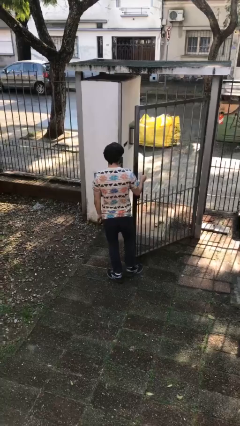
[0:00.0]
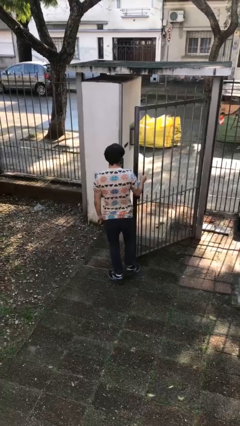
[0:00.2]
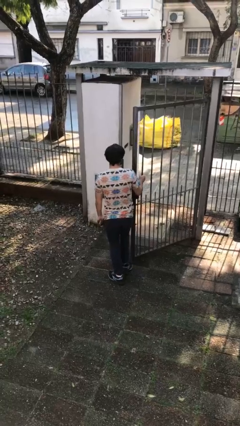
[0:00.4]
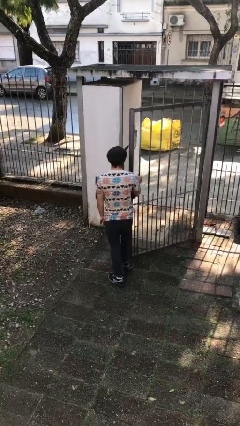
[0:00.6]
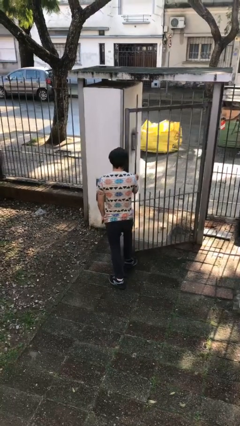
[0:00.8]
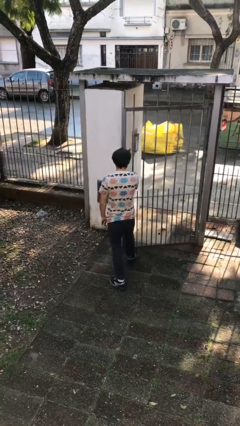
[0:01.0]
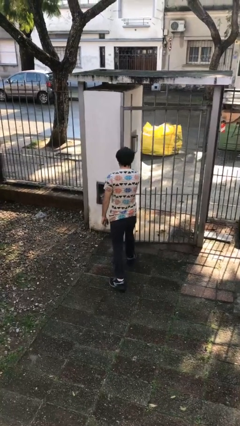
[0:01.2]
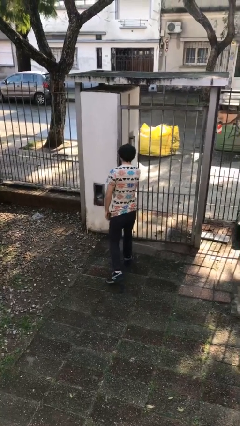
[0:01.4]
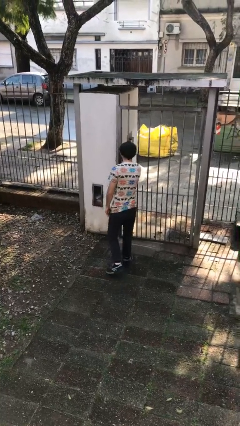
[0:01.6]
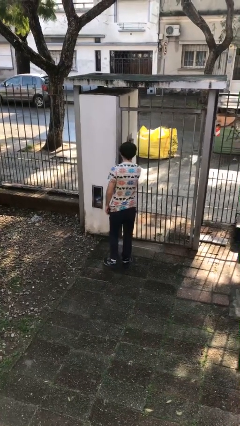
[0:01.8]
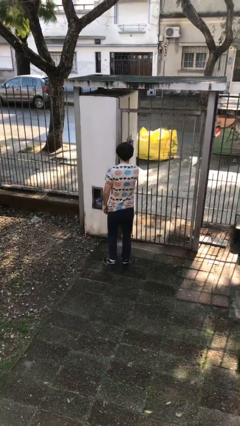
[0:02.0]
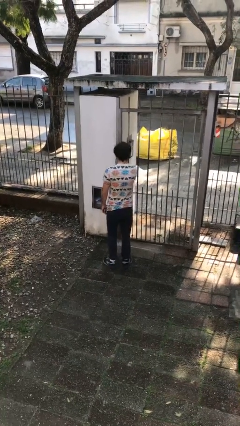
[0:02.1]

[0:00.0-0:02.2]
person closes gate

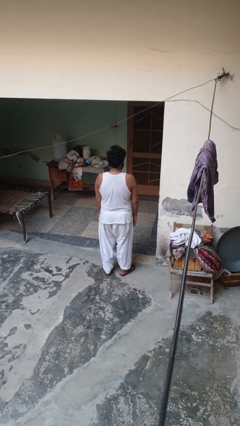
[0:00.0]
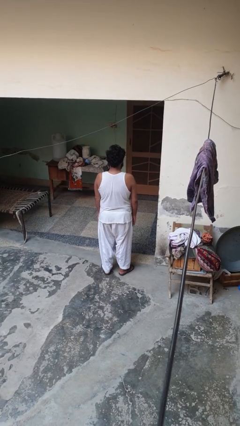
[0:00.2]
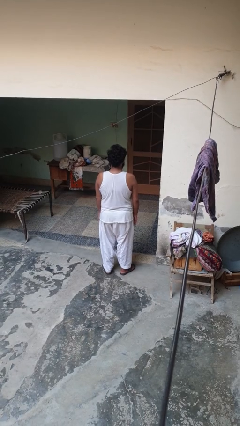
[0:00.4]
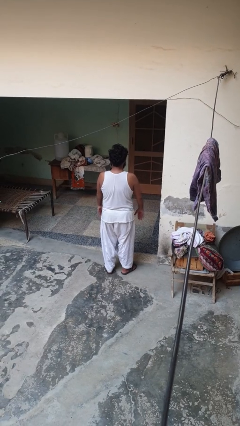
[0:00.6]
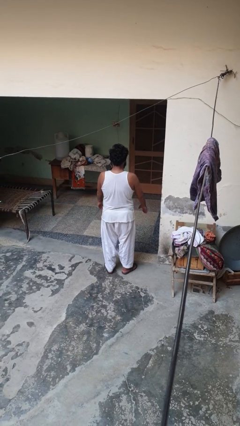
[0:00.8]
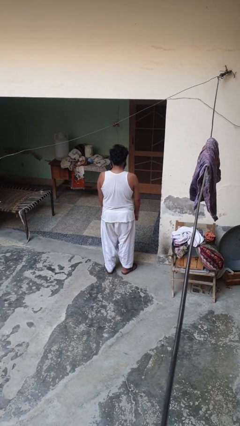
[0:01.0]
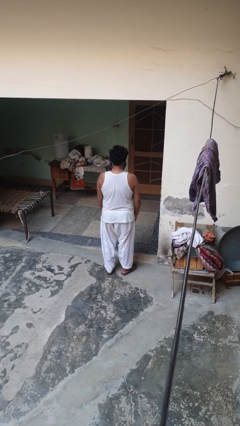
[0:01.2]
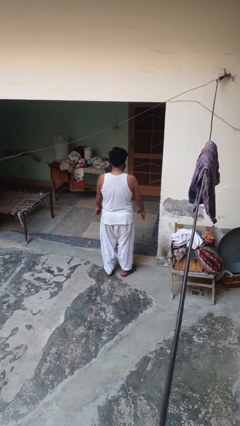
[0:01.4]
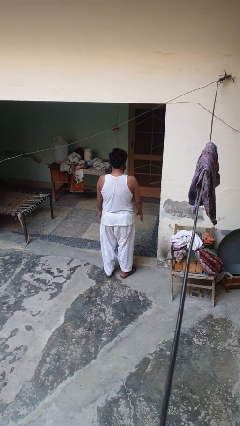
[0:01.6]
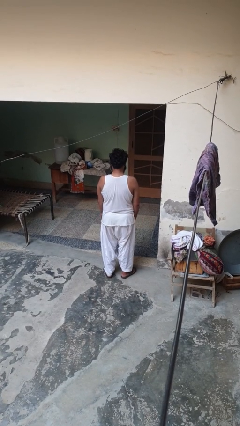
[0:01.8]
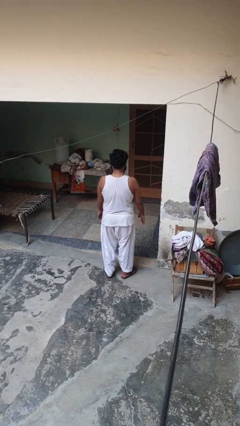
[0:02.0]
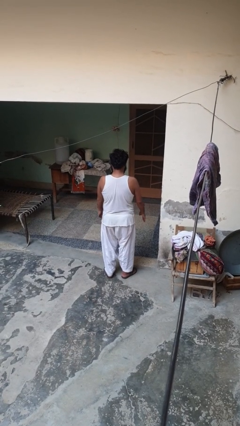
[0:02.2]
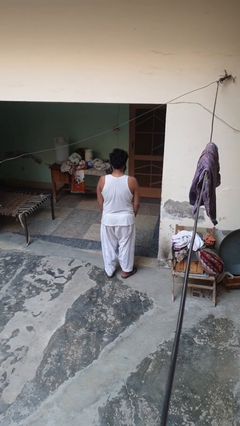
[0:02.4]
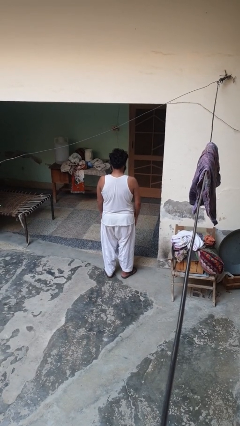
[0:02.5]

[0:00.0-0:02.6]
person slaps hands on thighs

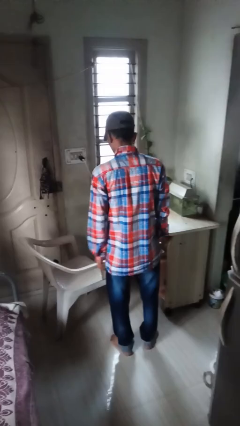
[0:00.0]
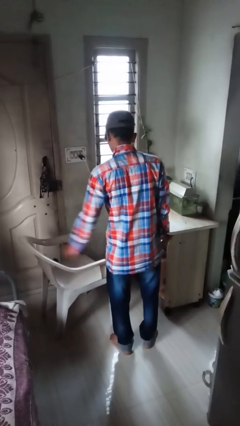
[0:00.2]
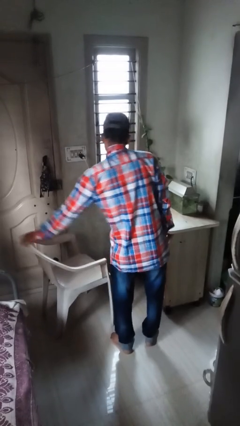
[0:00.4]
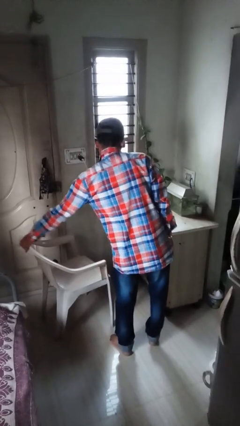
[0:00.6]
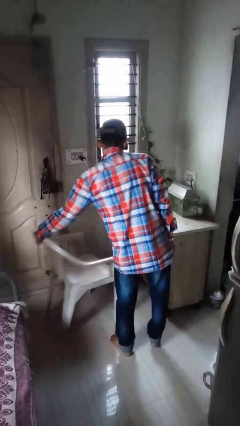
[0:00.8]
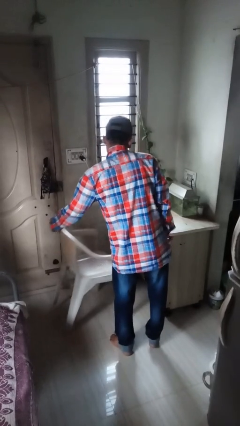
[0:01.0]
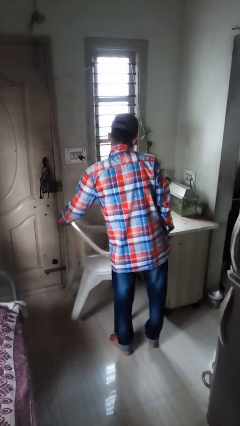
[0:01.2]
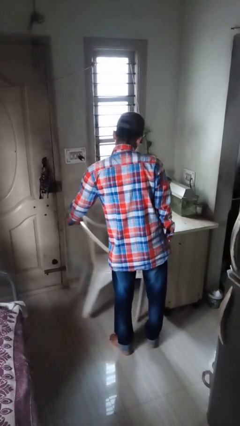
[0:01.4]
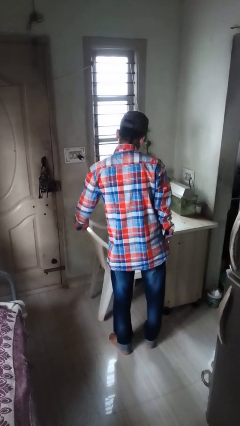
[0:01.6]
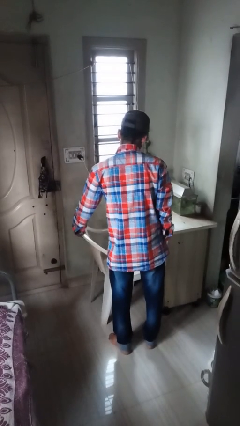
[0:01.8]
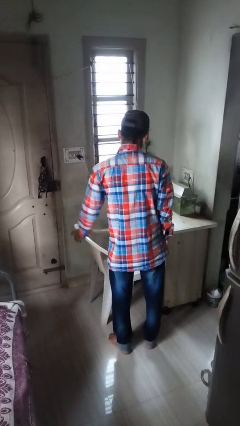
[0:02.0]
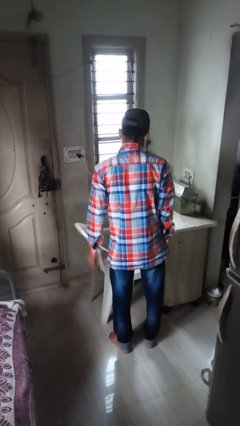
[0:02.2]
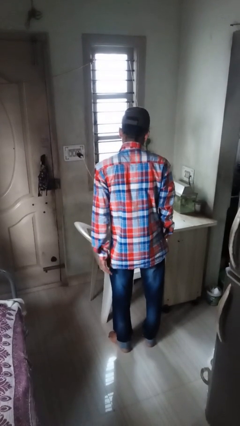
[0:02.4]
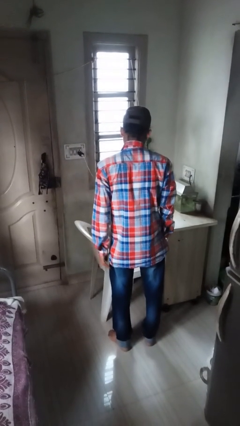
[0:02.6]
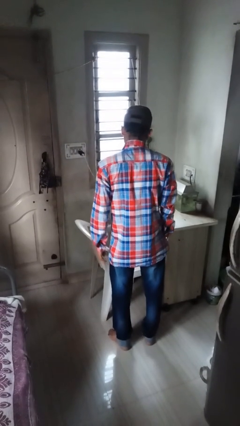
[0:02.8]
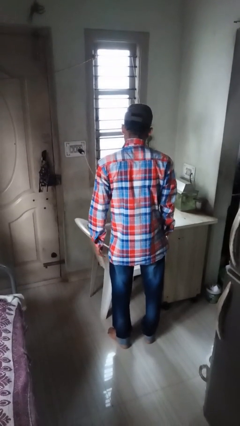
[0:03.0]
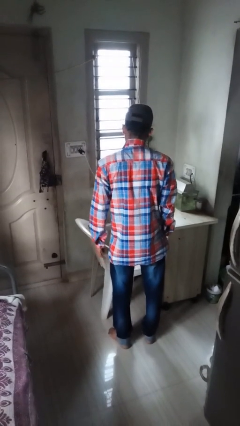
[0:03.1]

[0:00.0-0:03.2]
person pushes in chair

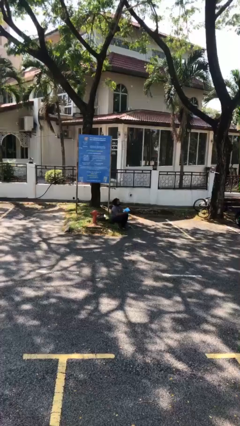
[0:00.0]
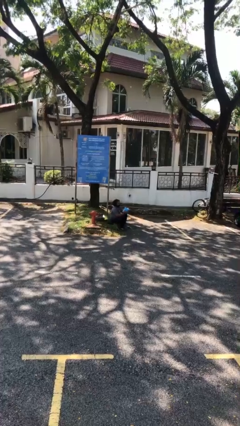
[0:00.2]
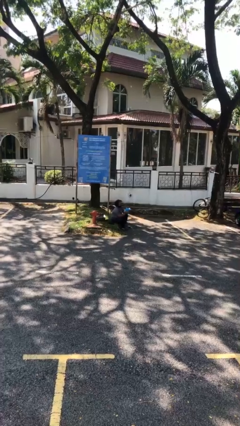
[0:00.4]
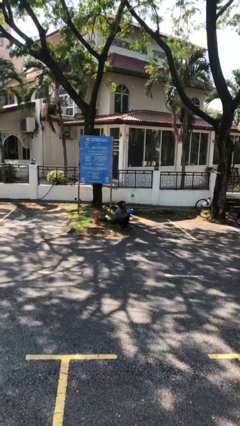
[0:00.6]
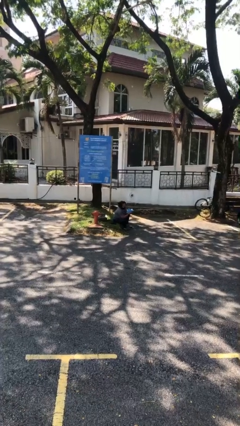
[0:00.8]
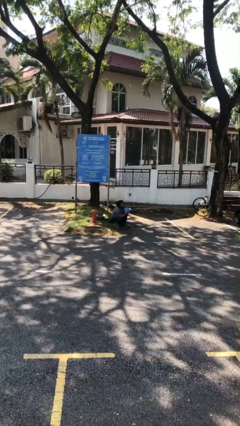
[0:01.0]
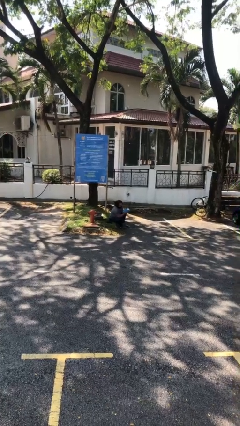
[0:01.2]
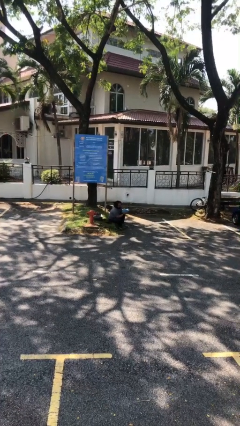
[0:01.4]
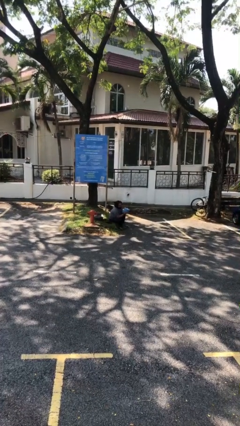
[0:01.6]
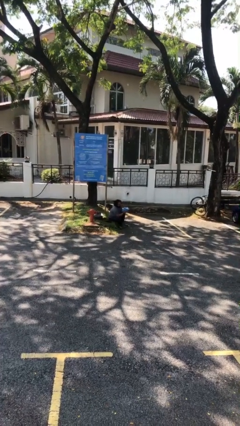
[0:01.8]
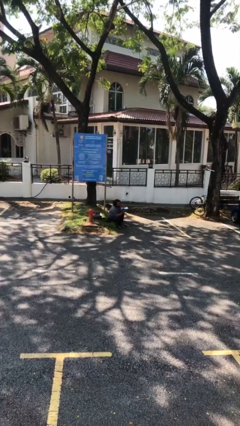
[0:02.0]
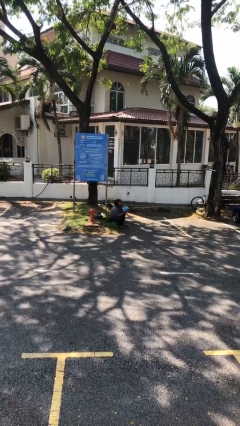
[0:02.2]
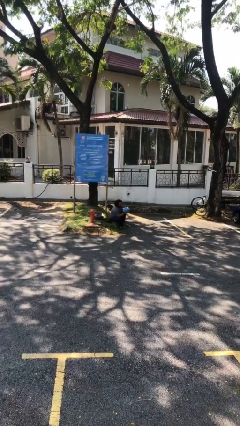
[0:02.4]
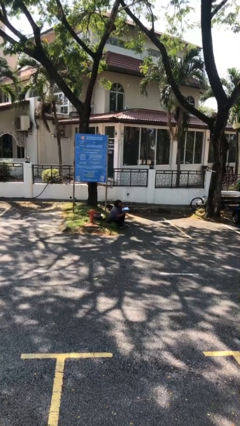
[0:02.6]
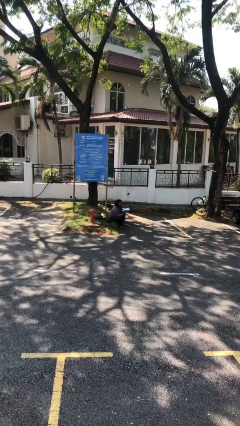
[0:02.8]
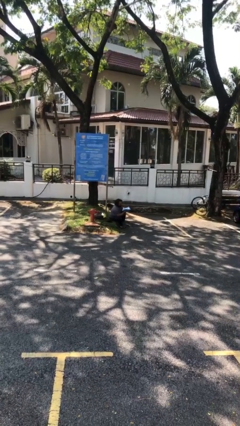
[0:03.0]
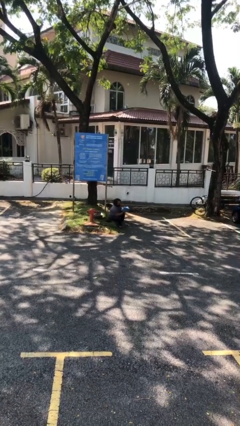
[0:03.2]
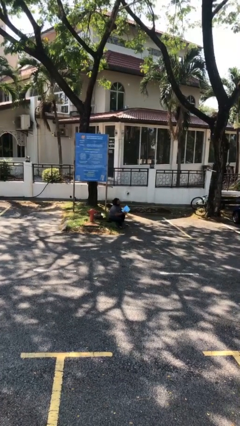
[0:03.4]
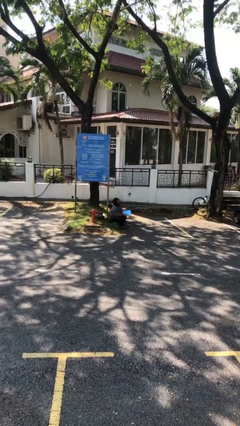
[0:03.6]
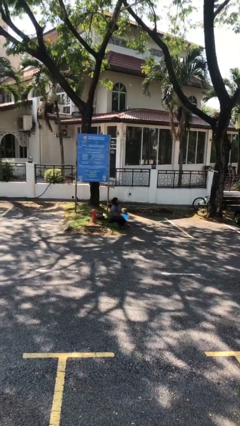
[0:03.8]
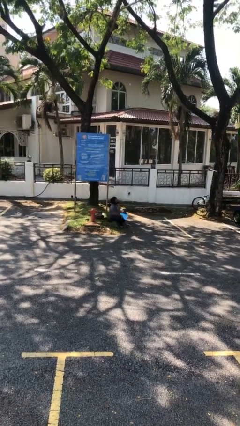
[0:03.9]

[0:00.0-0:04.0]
person reads document

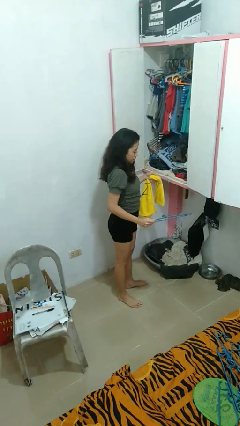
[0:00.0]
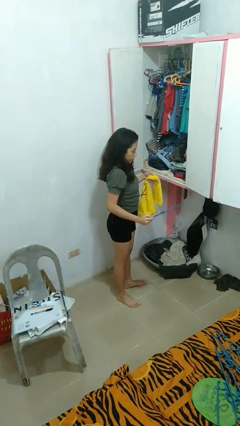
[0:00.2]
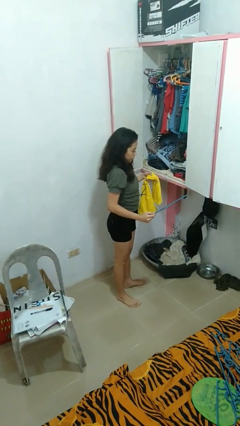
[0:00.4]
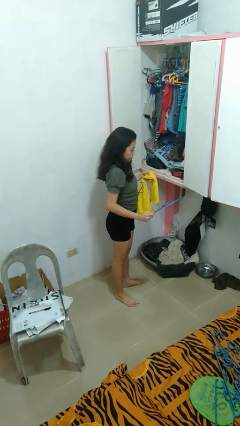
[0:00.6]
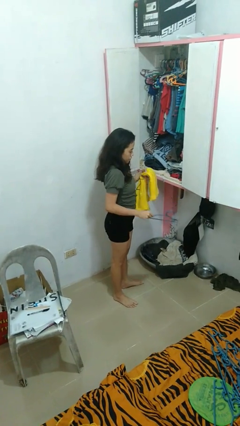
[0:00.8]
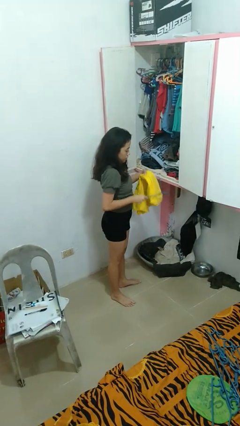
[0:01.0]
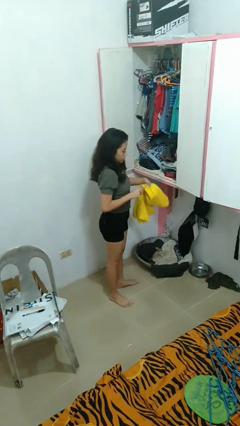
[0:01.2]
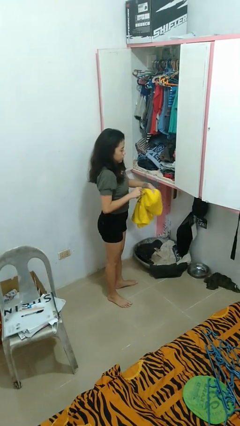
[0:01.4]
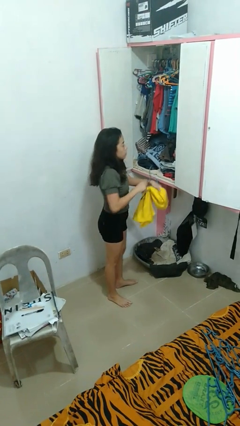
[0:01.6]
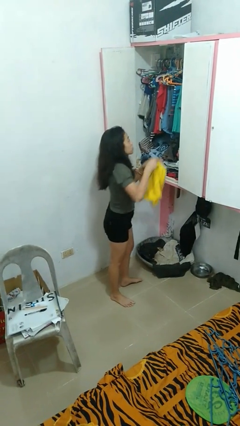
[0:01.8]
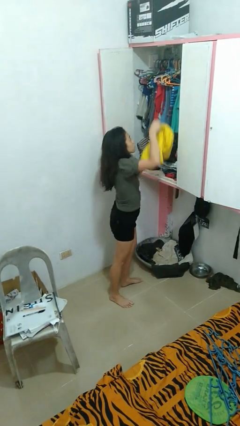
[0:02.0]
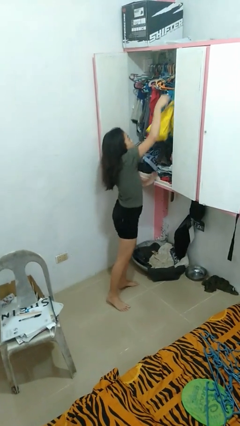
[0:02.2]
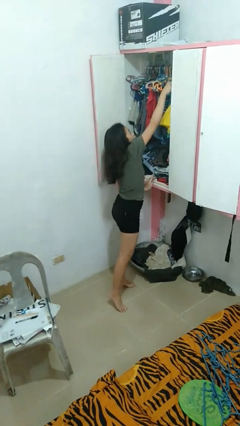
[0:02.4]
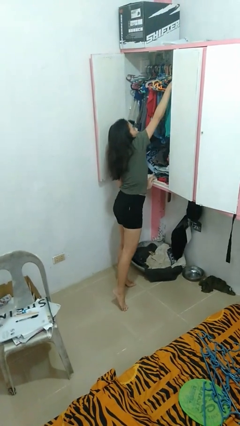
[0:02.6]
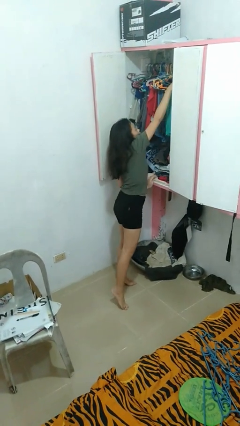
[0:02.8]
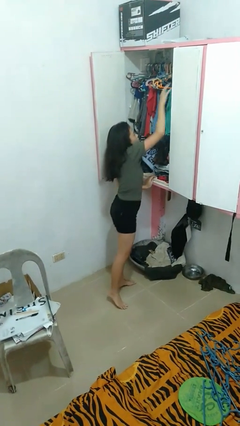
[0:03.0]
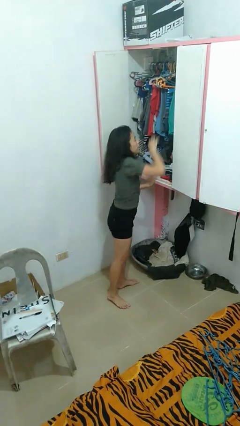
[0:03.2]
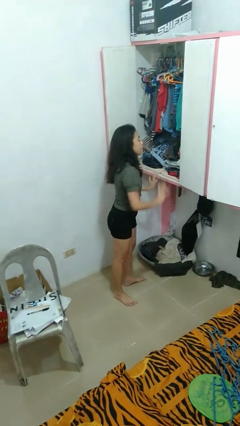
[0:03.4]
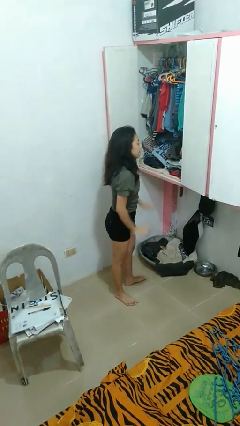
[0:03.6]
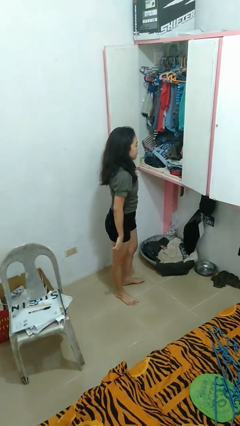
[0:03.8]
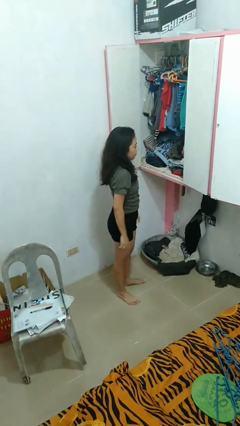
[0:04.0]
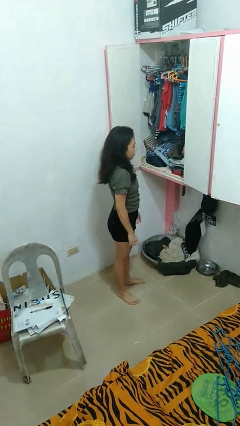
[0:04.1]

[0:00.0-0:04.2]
person puts clothes into closet

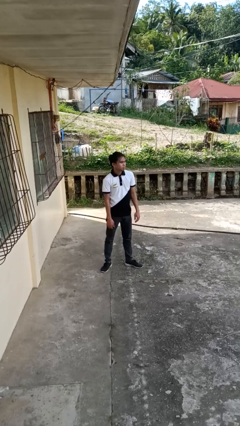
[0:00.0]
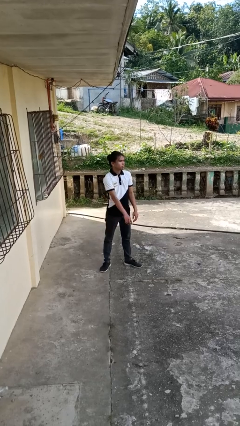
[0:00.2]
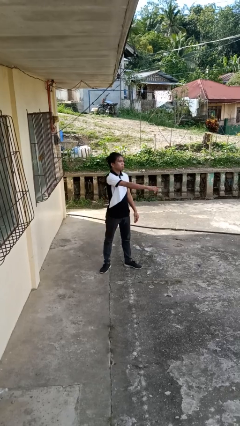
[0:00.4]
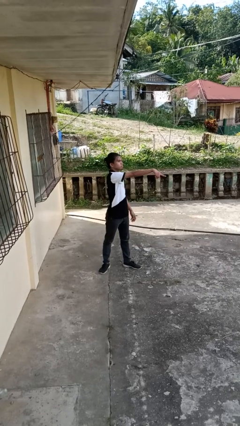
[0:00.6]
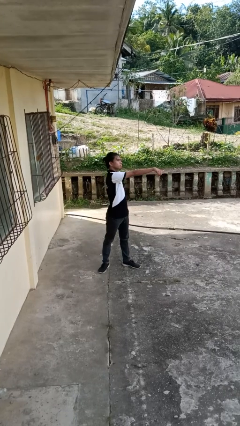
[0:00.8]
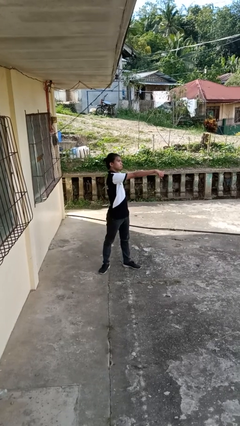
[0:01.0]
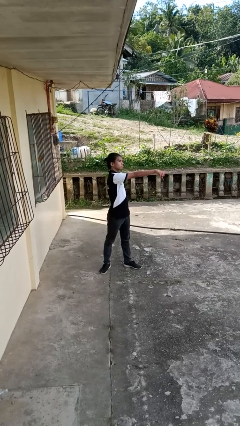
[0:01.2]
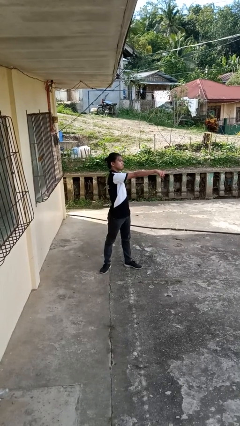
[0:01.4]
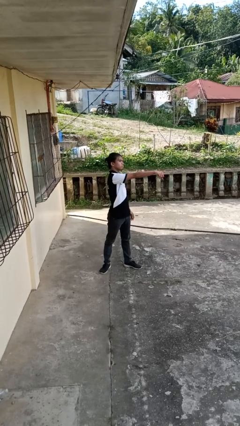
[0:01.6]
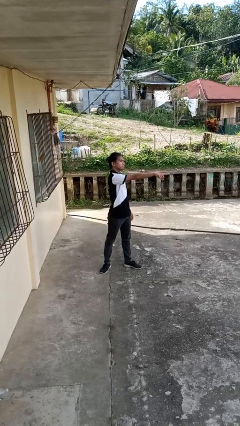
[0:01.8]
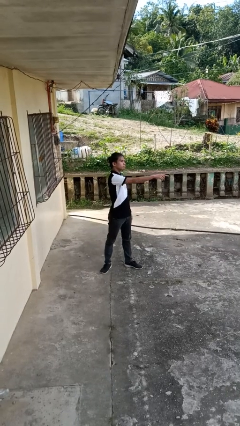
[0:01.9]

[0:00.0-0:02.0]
person points at person
